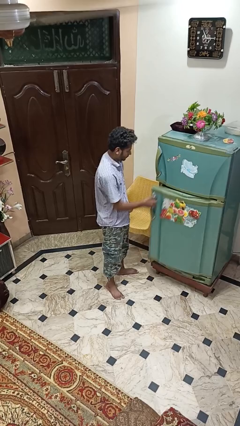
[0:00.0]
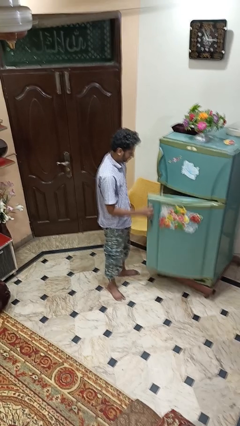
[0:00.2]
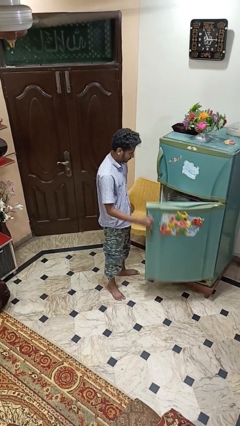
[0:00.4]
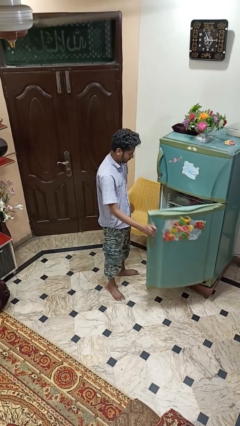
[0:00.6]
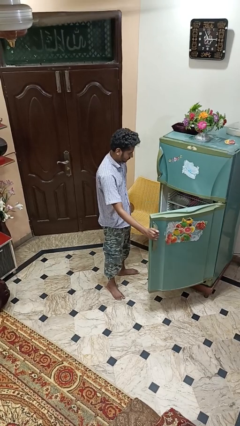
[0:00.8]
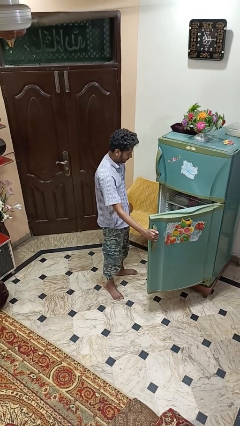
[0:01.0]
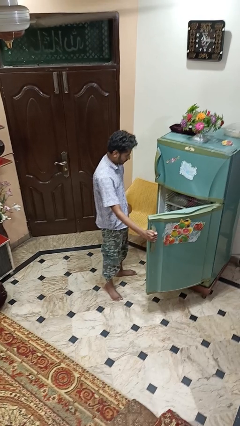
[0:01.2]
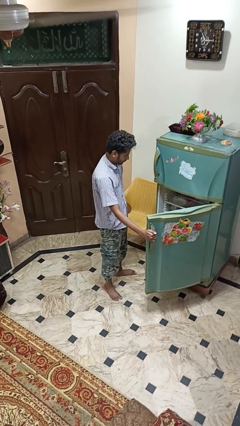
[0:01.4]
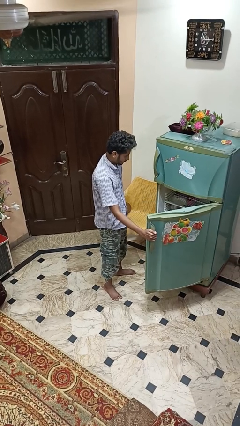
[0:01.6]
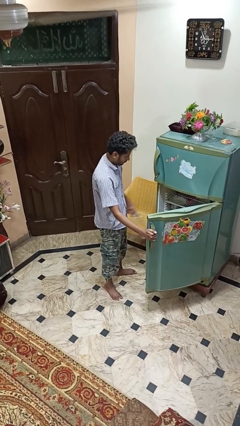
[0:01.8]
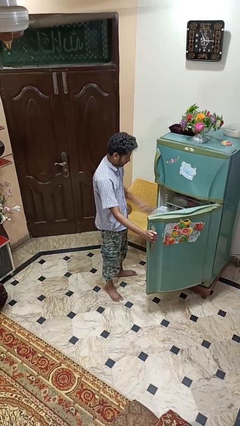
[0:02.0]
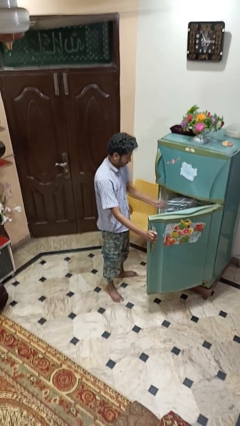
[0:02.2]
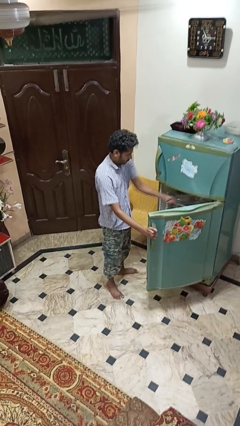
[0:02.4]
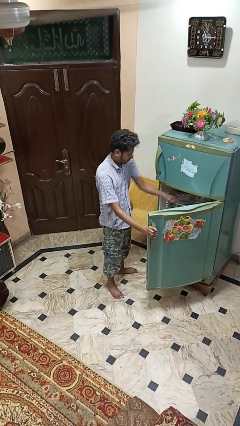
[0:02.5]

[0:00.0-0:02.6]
person opens refrigerator

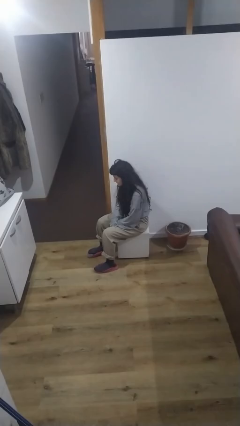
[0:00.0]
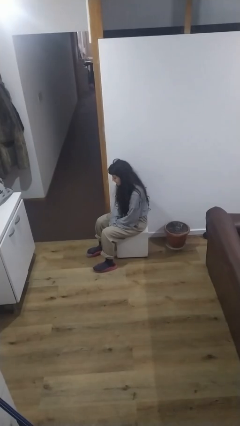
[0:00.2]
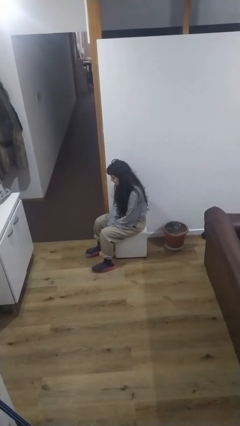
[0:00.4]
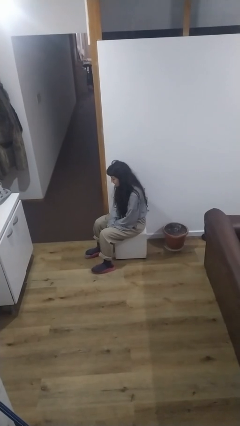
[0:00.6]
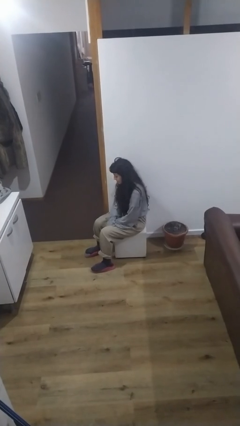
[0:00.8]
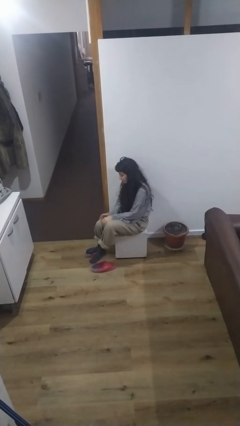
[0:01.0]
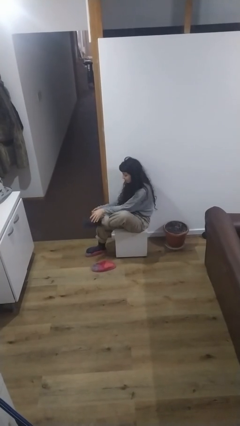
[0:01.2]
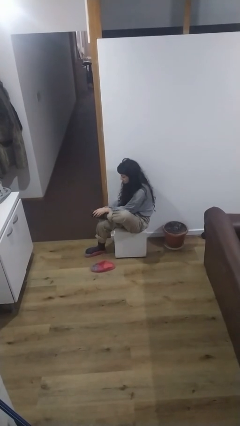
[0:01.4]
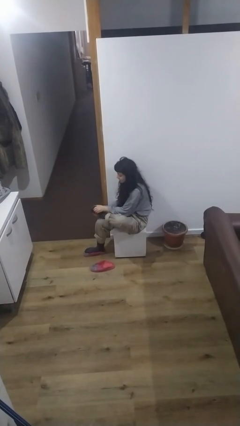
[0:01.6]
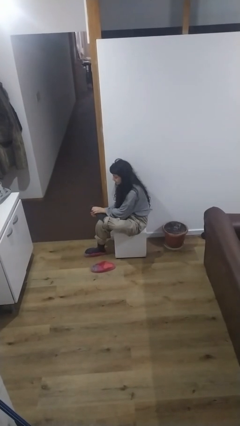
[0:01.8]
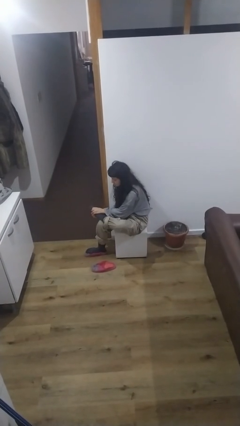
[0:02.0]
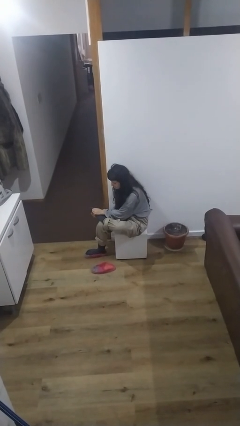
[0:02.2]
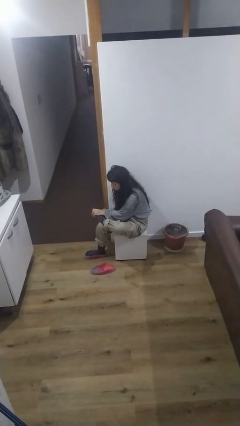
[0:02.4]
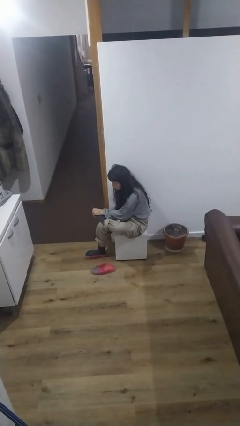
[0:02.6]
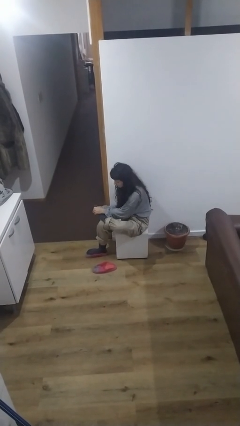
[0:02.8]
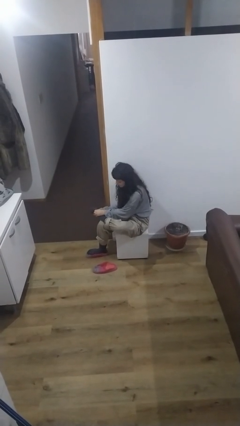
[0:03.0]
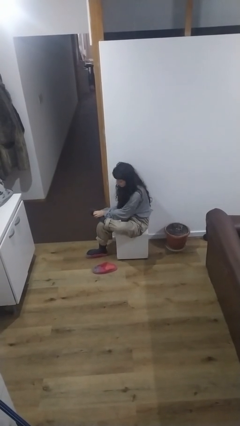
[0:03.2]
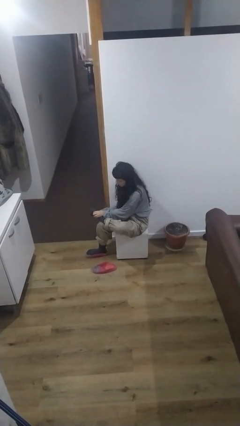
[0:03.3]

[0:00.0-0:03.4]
person rubs foot

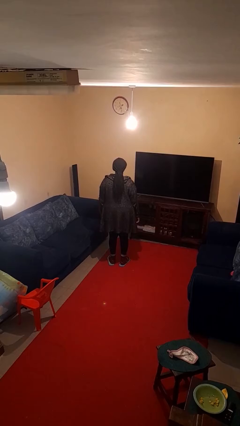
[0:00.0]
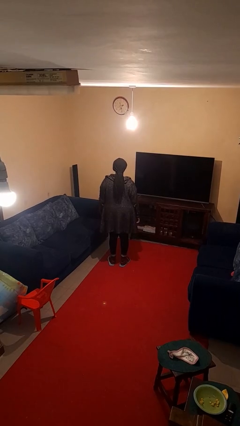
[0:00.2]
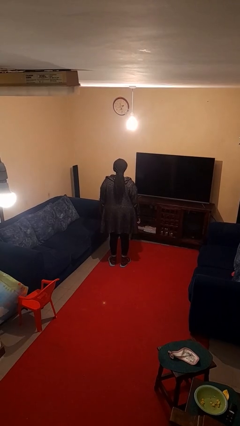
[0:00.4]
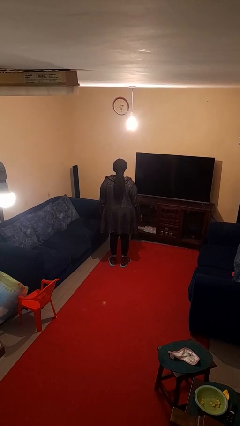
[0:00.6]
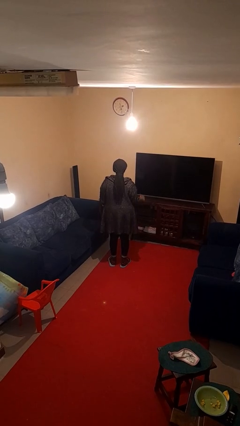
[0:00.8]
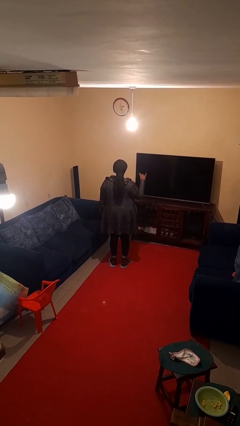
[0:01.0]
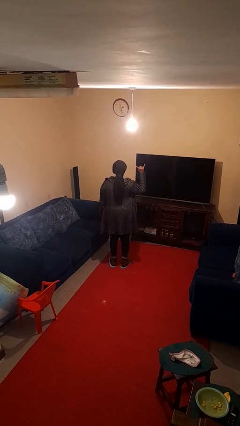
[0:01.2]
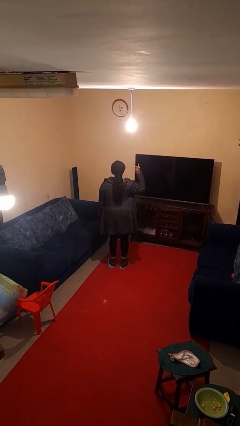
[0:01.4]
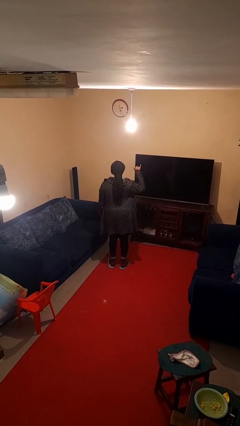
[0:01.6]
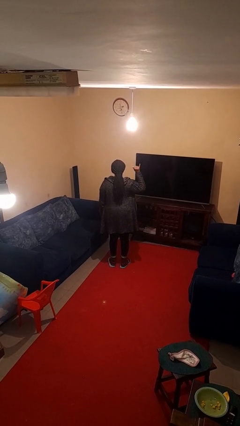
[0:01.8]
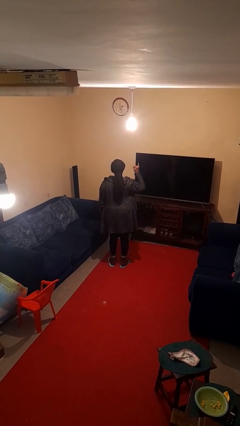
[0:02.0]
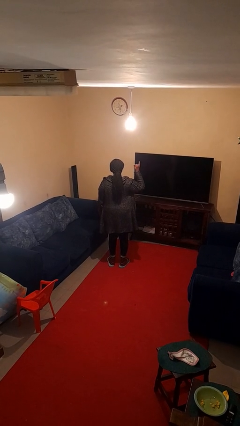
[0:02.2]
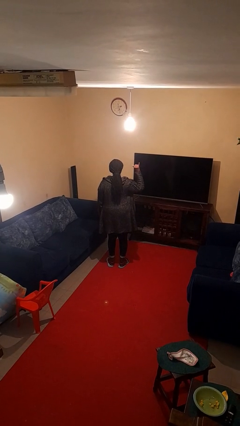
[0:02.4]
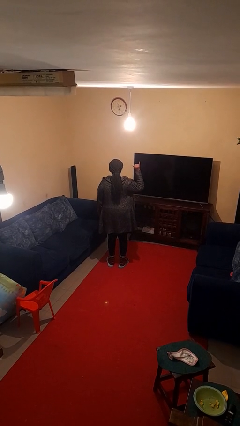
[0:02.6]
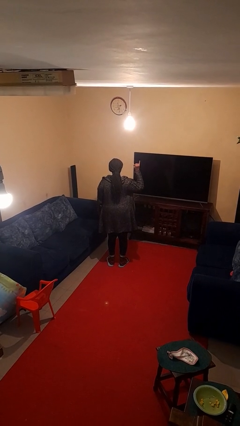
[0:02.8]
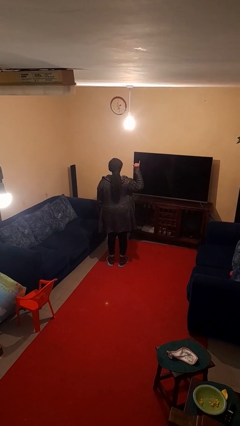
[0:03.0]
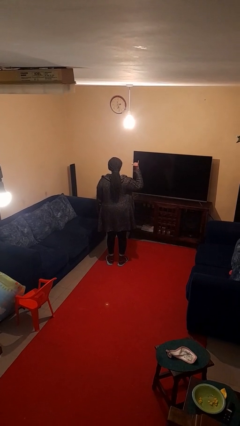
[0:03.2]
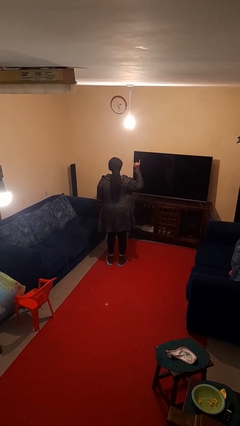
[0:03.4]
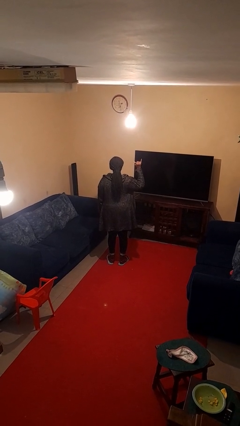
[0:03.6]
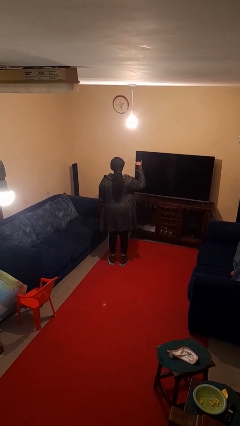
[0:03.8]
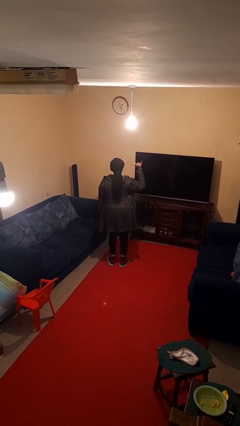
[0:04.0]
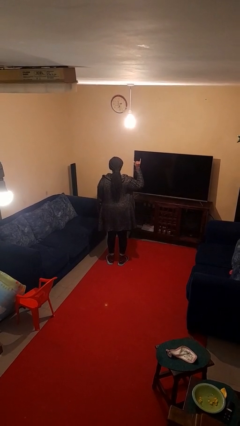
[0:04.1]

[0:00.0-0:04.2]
person gestures hang loose

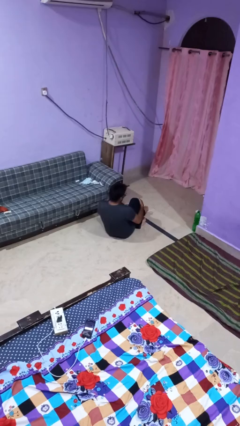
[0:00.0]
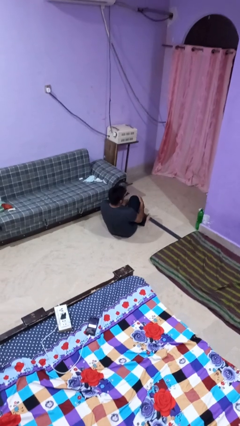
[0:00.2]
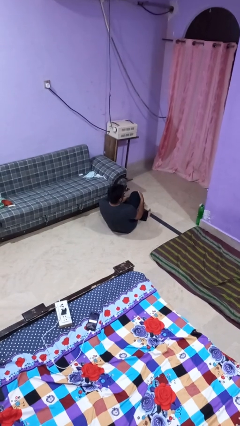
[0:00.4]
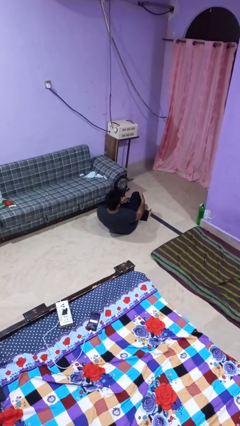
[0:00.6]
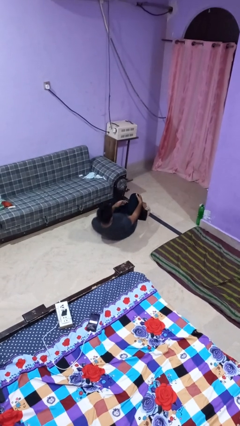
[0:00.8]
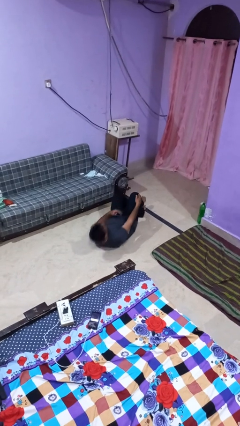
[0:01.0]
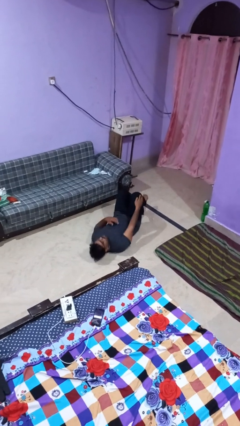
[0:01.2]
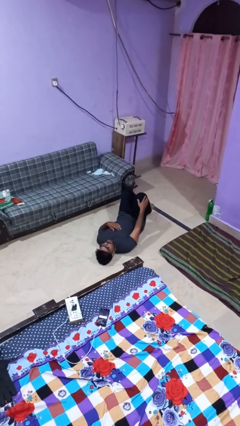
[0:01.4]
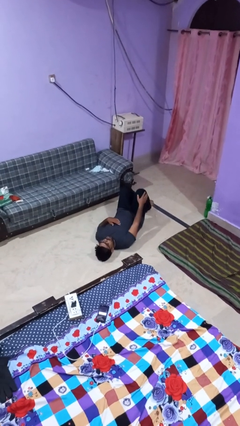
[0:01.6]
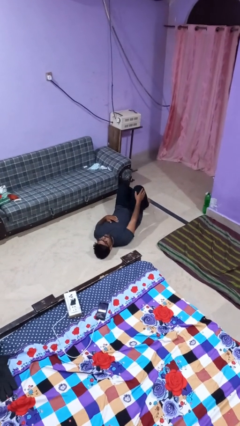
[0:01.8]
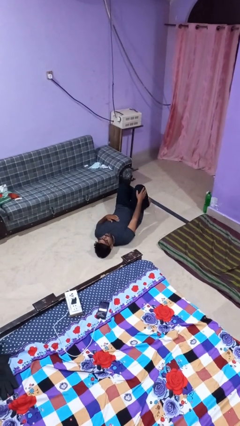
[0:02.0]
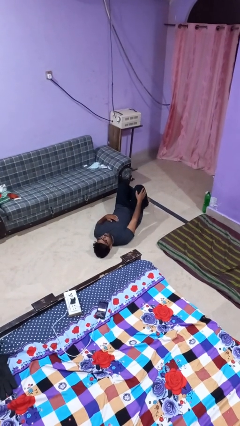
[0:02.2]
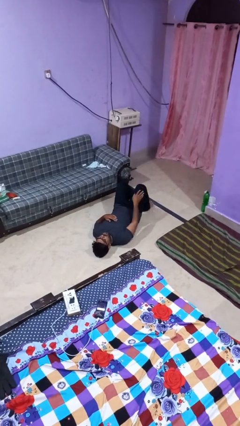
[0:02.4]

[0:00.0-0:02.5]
person lies down on floor

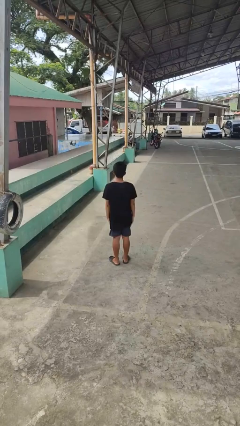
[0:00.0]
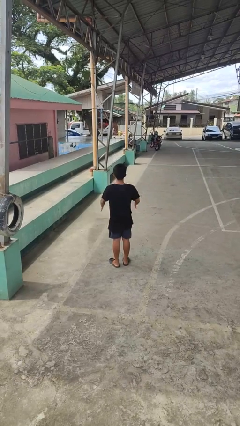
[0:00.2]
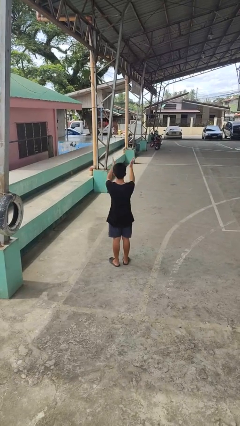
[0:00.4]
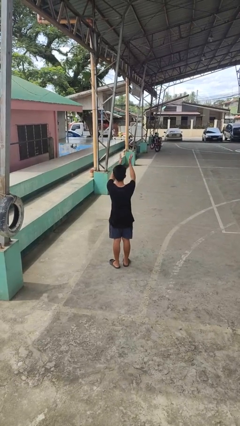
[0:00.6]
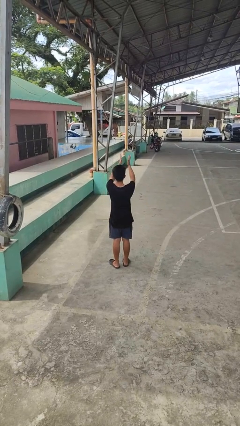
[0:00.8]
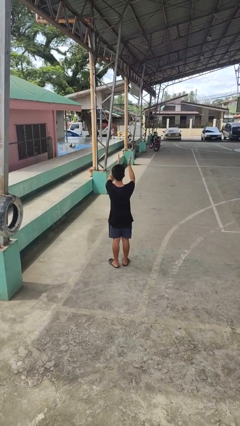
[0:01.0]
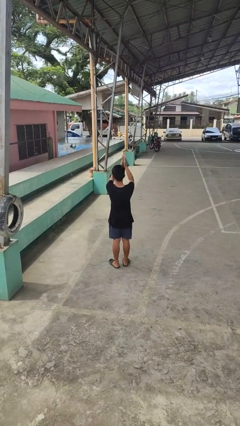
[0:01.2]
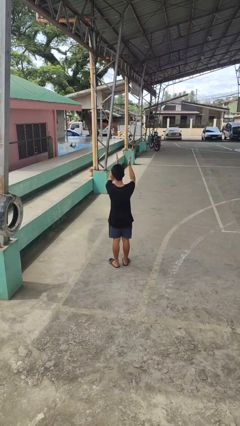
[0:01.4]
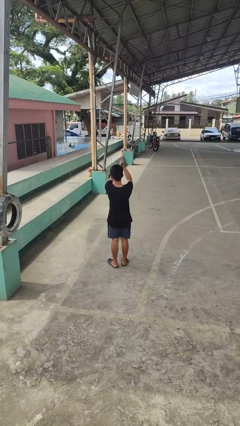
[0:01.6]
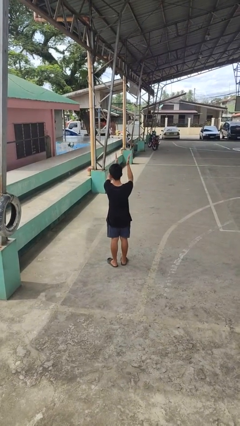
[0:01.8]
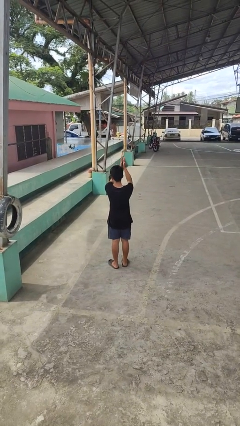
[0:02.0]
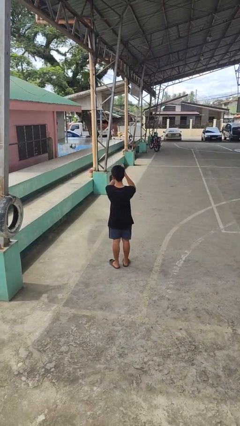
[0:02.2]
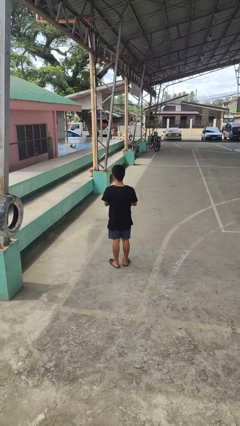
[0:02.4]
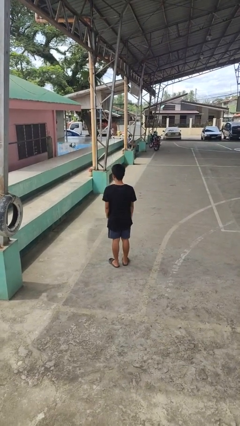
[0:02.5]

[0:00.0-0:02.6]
person claps hands

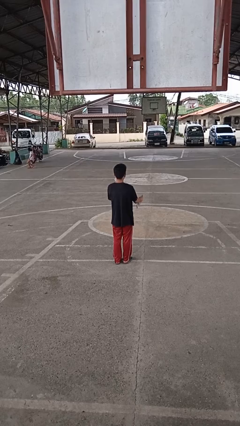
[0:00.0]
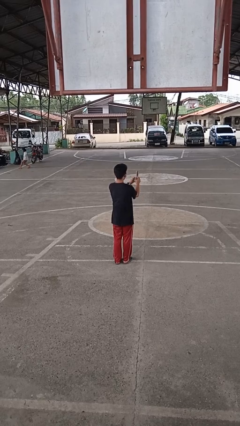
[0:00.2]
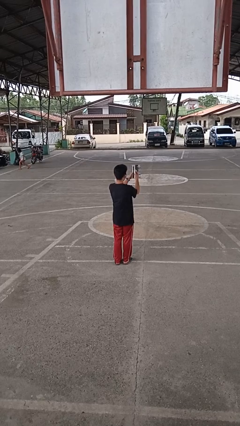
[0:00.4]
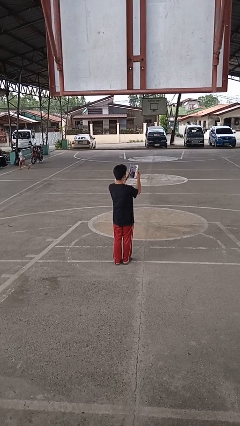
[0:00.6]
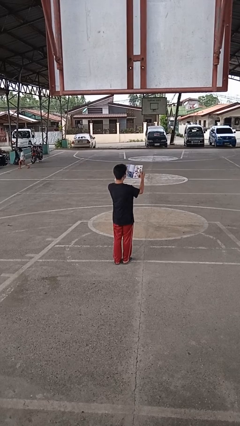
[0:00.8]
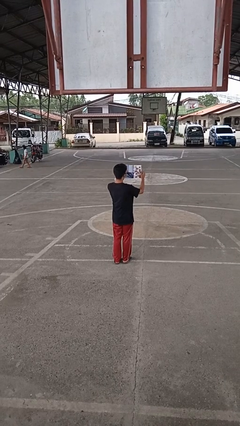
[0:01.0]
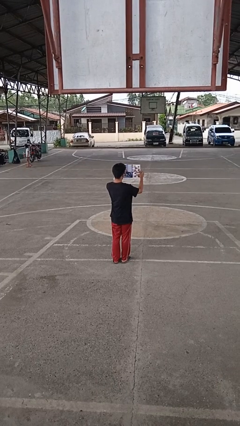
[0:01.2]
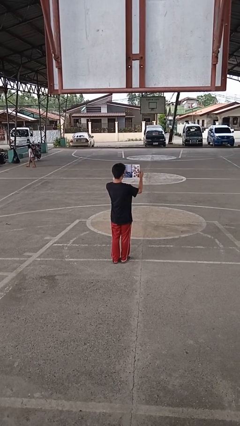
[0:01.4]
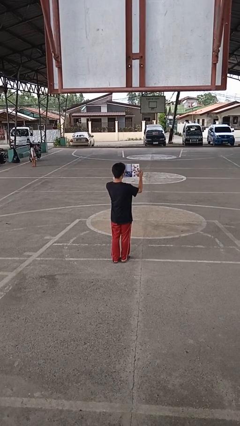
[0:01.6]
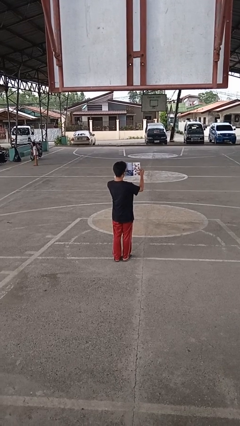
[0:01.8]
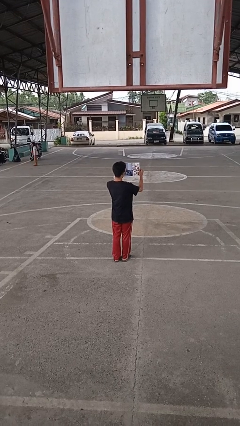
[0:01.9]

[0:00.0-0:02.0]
person reads magazine

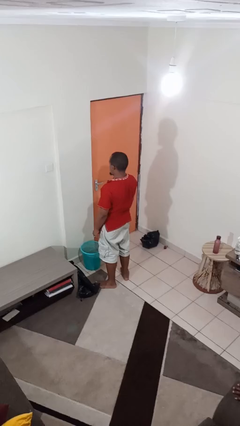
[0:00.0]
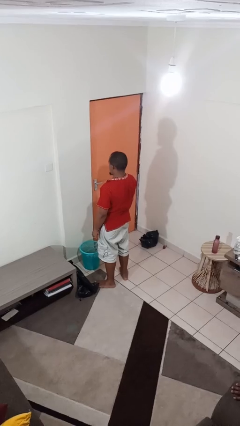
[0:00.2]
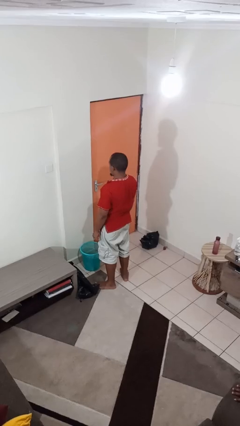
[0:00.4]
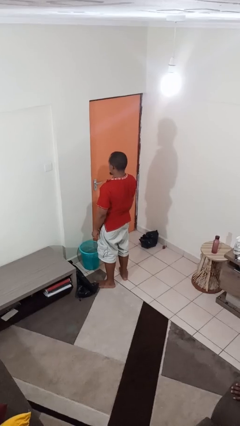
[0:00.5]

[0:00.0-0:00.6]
person inserts trashbag into trashcan
